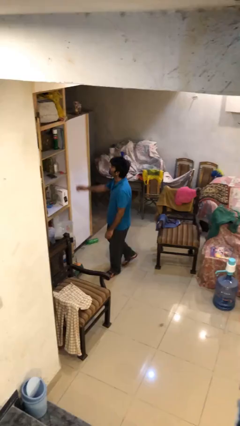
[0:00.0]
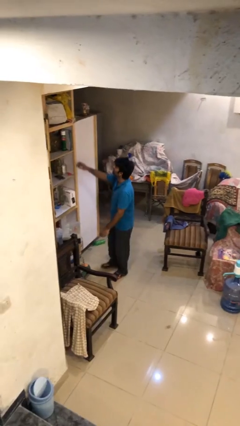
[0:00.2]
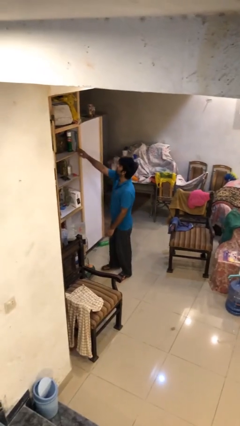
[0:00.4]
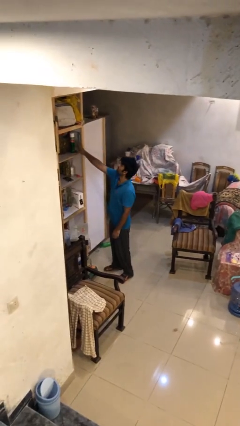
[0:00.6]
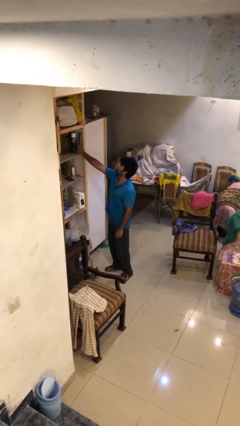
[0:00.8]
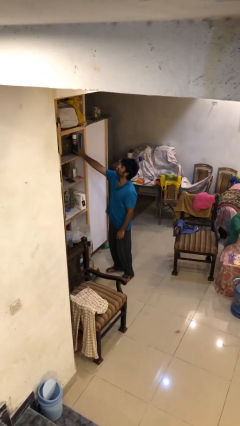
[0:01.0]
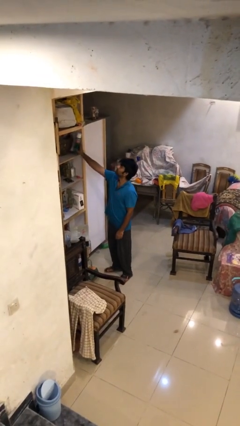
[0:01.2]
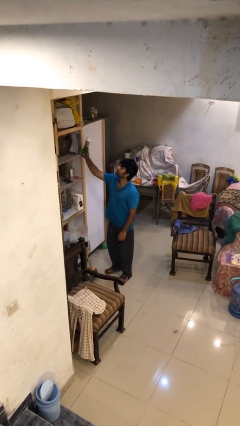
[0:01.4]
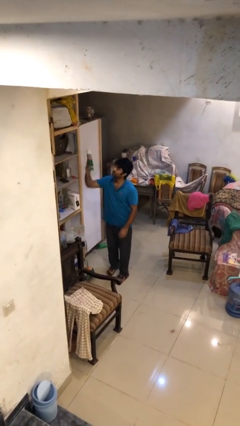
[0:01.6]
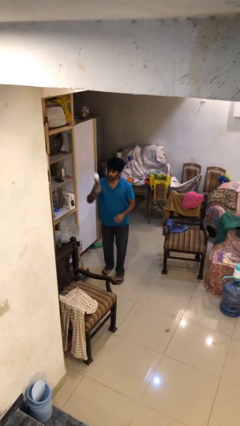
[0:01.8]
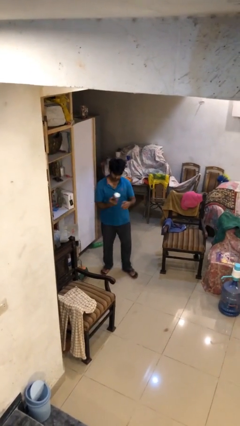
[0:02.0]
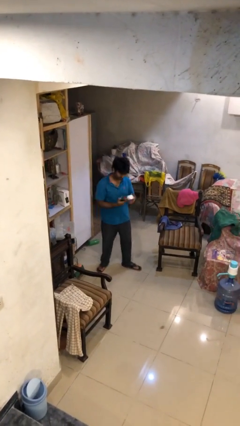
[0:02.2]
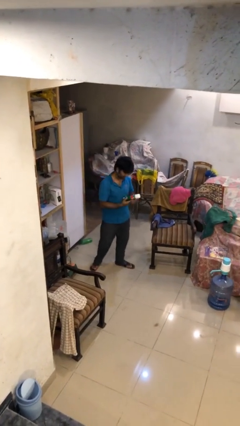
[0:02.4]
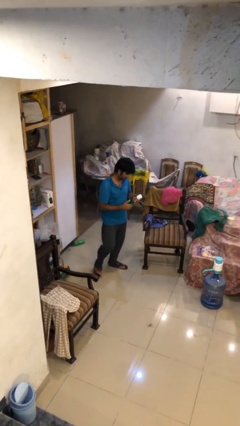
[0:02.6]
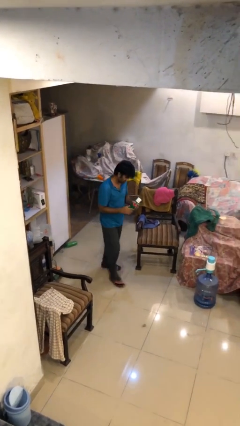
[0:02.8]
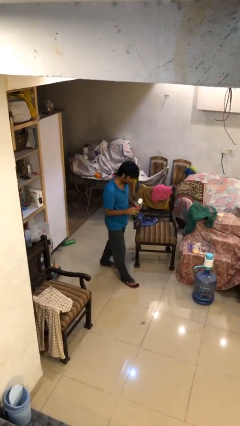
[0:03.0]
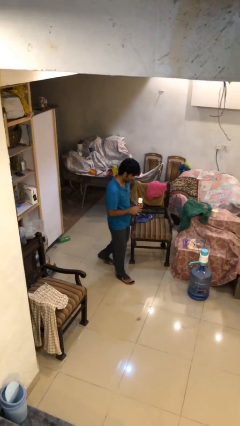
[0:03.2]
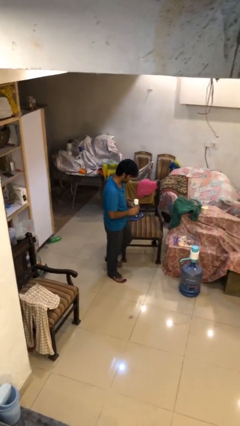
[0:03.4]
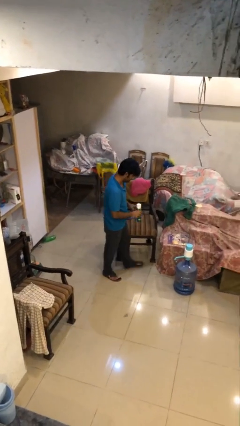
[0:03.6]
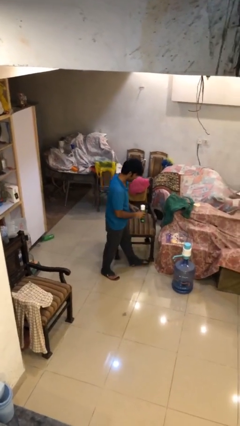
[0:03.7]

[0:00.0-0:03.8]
person picks up object from shelf

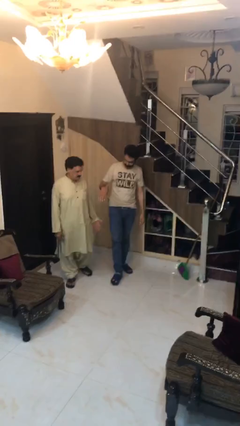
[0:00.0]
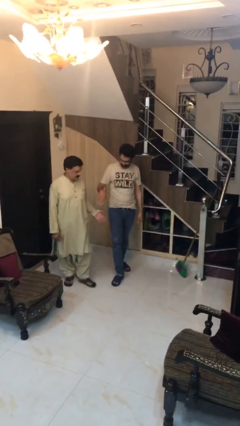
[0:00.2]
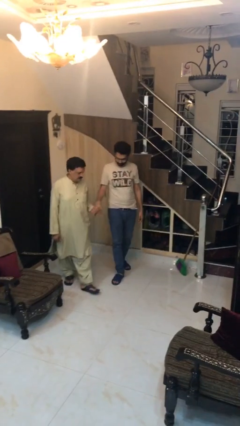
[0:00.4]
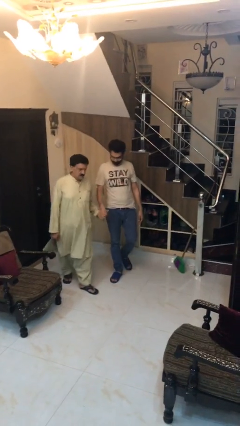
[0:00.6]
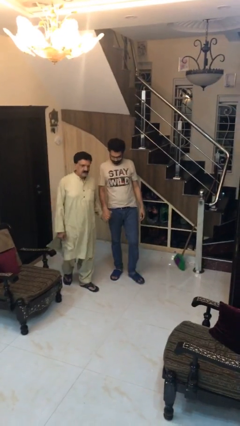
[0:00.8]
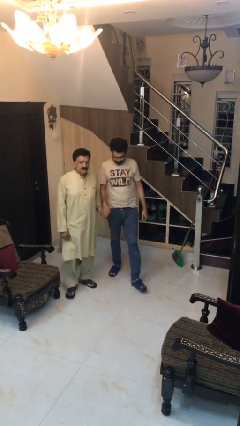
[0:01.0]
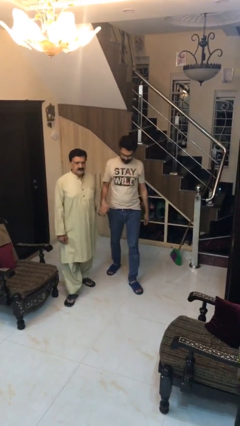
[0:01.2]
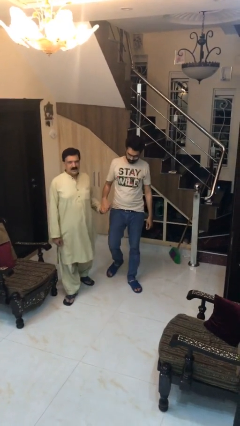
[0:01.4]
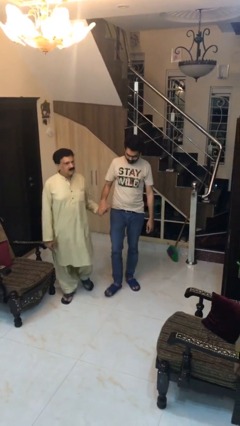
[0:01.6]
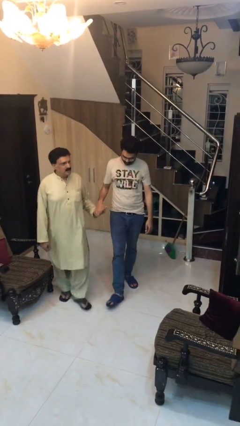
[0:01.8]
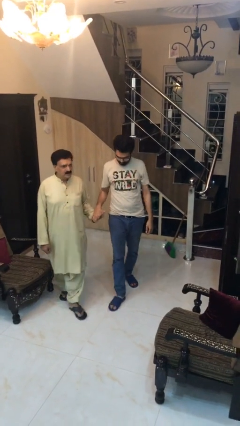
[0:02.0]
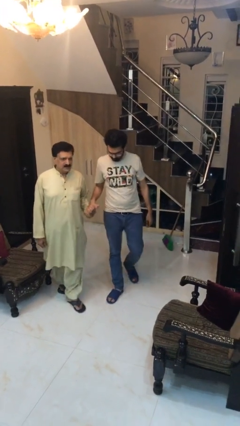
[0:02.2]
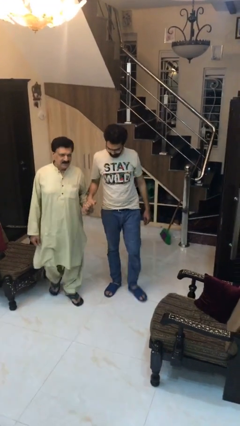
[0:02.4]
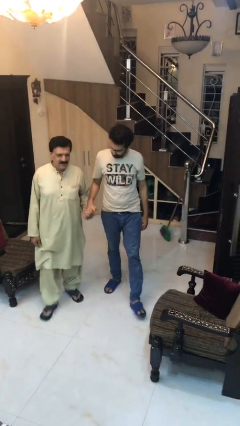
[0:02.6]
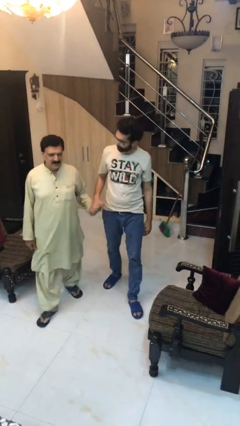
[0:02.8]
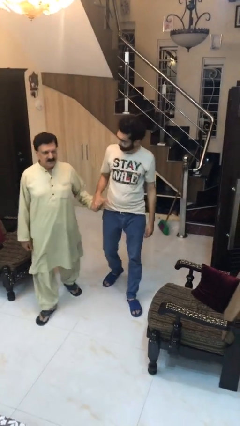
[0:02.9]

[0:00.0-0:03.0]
person holds hand

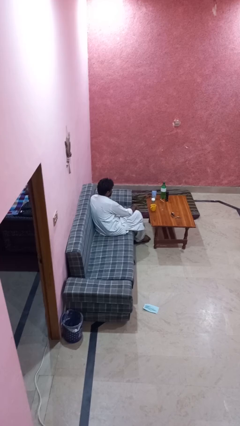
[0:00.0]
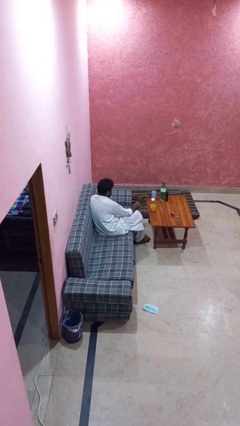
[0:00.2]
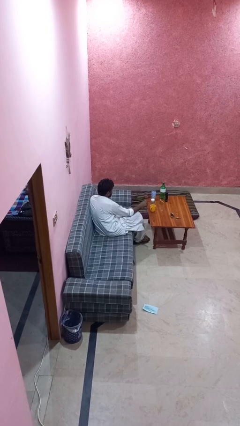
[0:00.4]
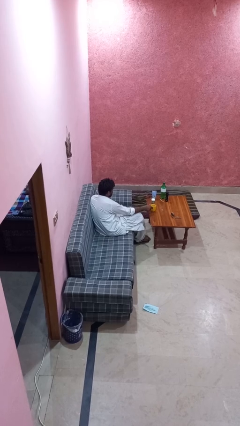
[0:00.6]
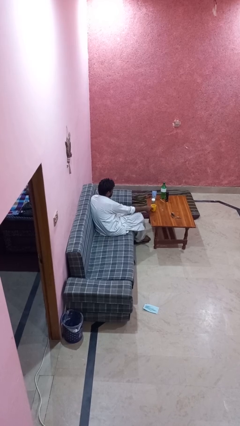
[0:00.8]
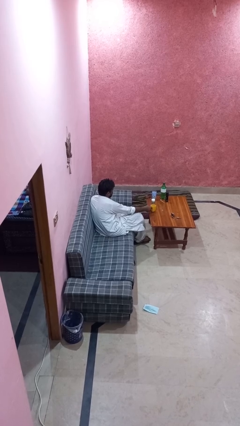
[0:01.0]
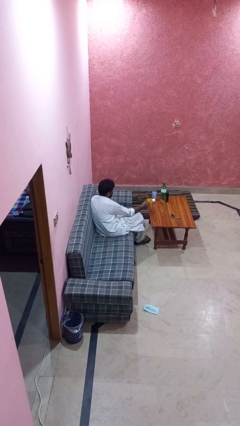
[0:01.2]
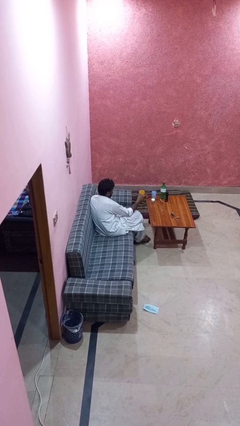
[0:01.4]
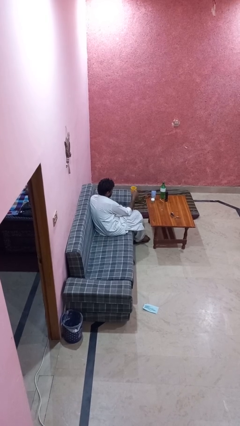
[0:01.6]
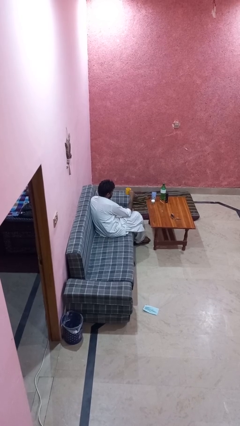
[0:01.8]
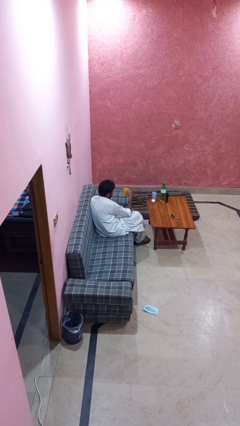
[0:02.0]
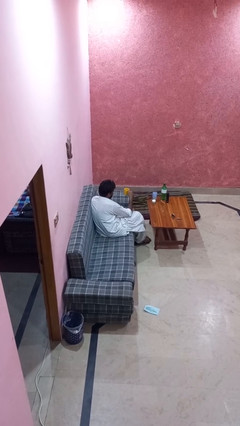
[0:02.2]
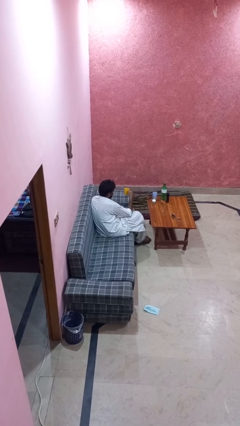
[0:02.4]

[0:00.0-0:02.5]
person picks up object from table

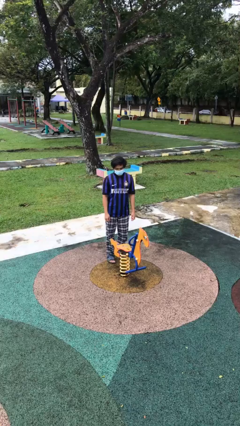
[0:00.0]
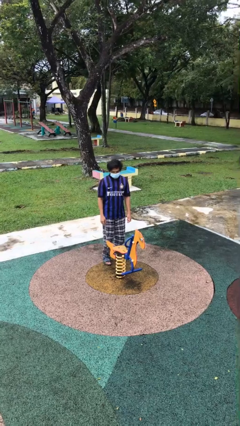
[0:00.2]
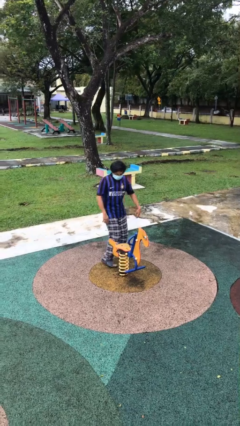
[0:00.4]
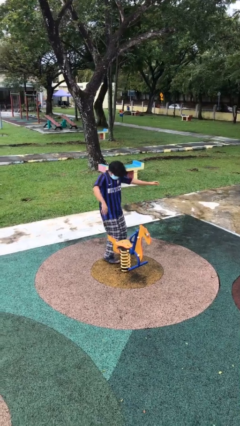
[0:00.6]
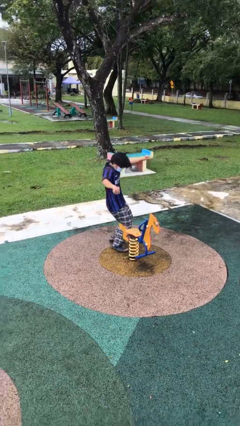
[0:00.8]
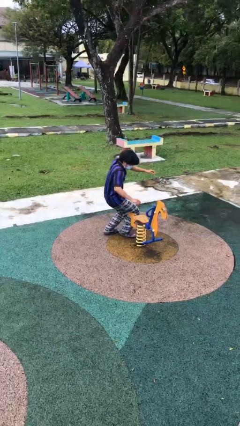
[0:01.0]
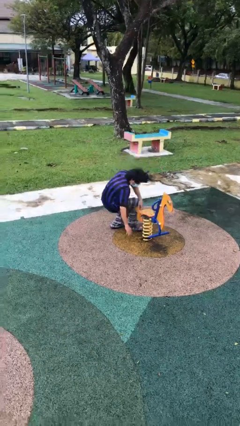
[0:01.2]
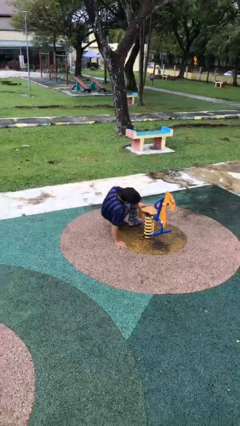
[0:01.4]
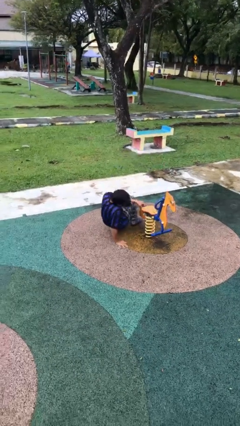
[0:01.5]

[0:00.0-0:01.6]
person trips on object on floor

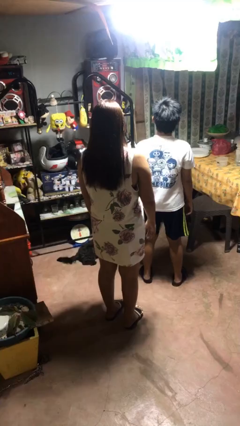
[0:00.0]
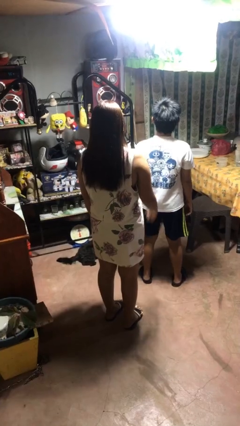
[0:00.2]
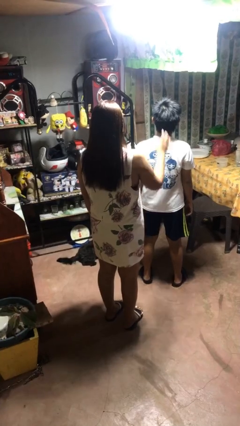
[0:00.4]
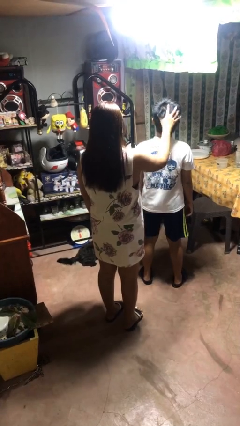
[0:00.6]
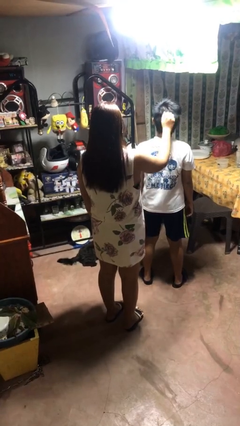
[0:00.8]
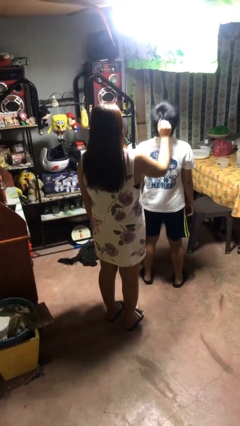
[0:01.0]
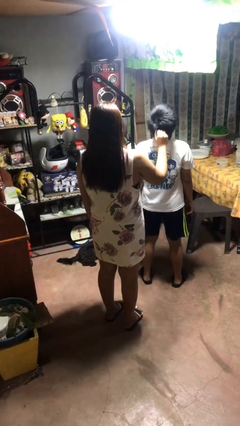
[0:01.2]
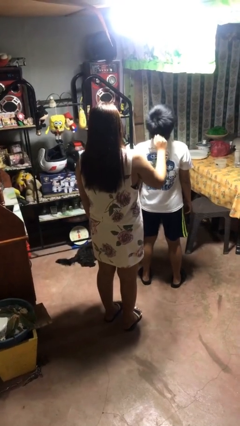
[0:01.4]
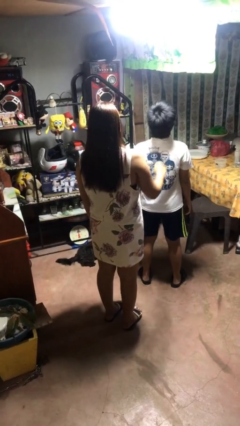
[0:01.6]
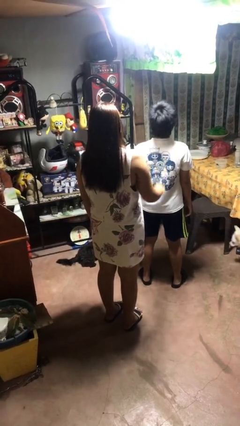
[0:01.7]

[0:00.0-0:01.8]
person grabs person by hair

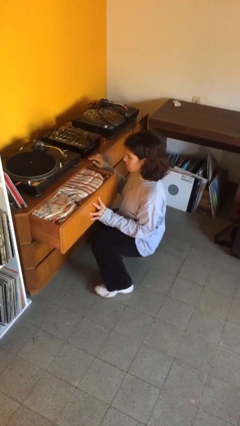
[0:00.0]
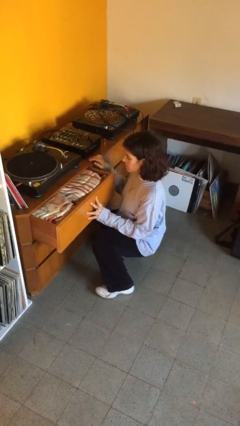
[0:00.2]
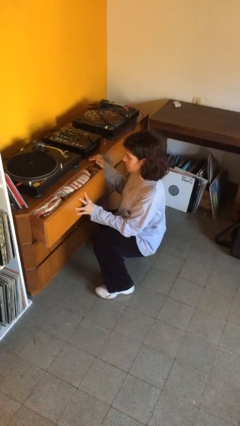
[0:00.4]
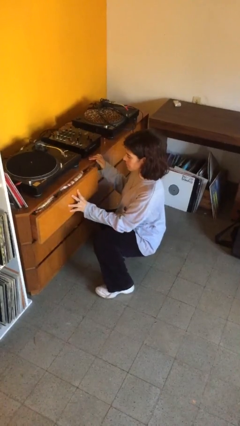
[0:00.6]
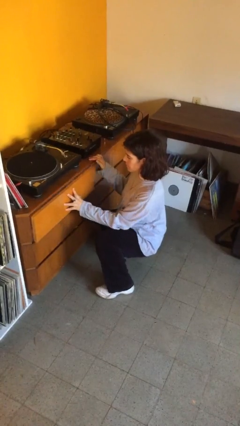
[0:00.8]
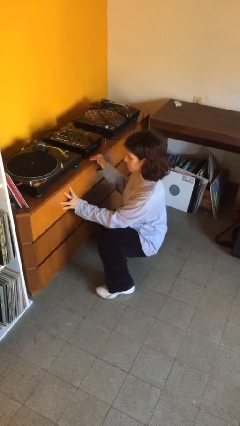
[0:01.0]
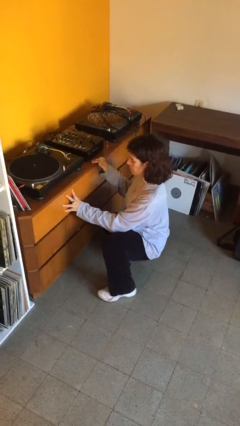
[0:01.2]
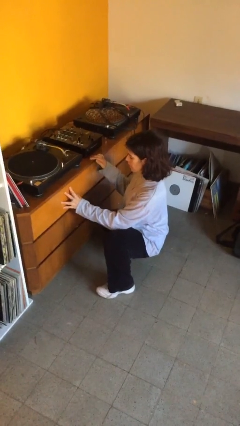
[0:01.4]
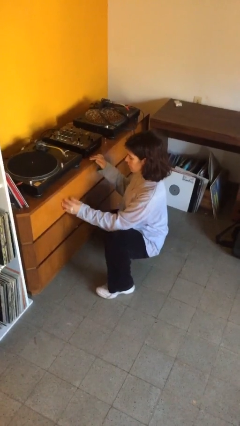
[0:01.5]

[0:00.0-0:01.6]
person closes dresser drawer

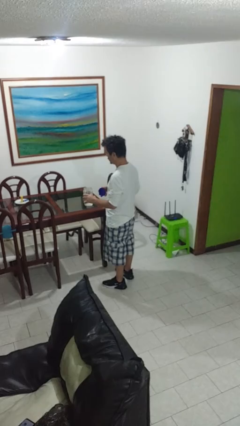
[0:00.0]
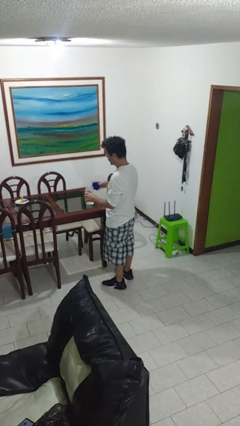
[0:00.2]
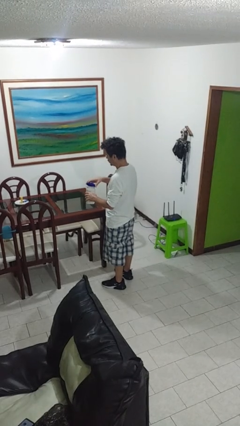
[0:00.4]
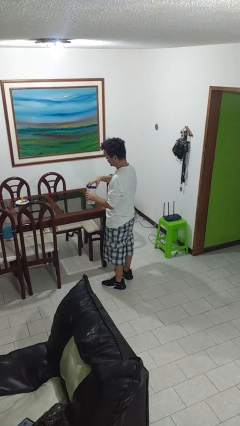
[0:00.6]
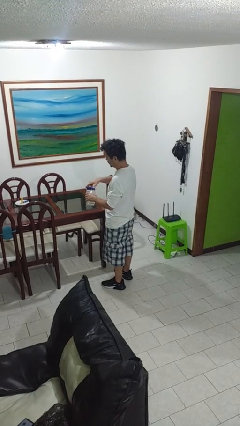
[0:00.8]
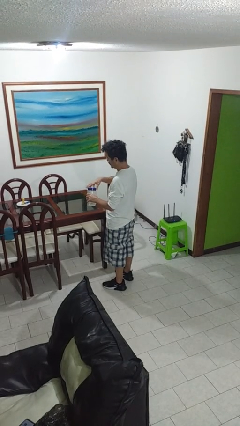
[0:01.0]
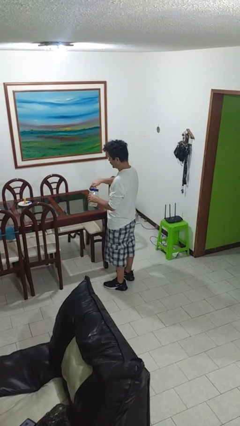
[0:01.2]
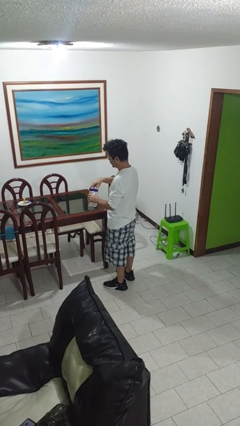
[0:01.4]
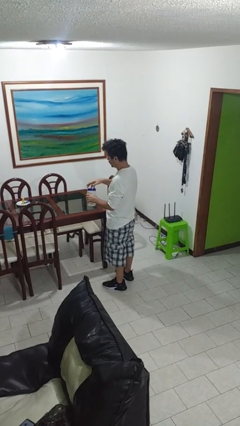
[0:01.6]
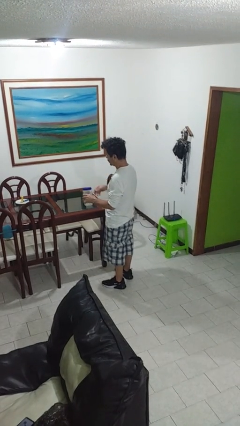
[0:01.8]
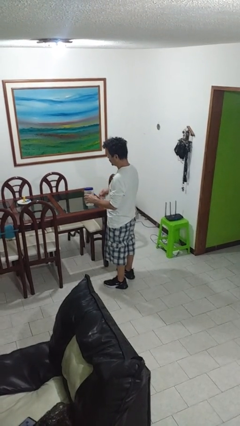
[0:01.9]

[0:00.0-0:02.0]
person closes jar

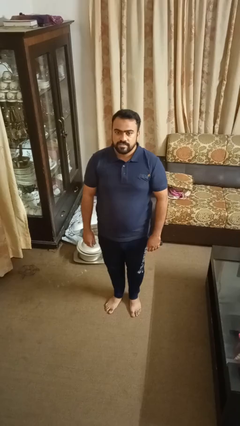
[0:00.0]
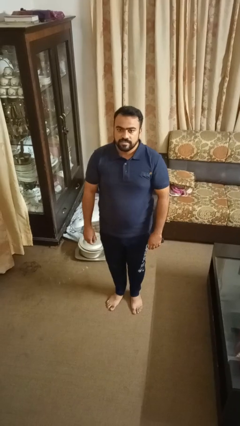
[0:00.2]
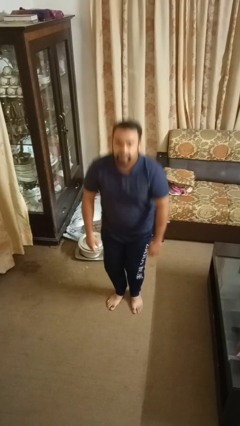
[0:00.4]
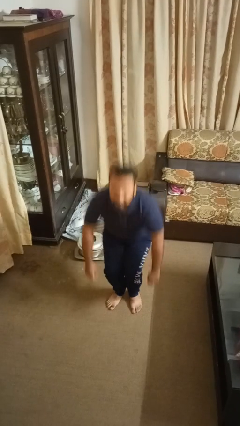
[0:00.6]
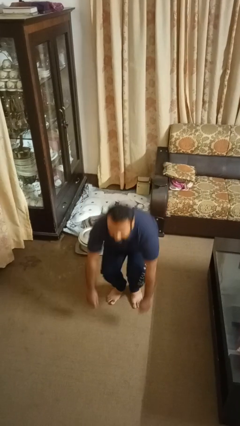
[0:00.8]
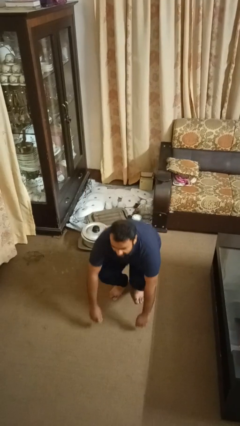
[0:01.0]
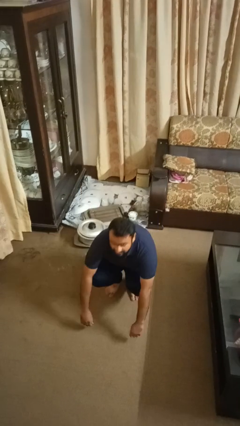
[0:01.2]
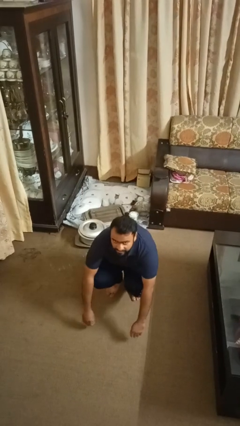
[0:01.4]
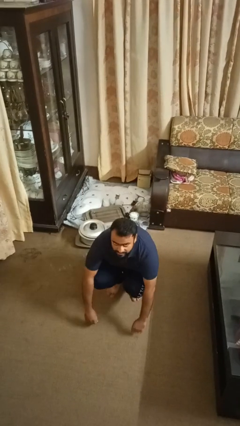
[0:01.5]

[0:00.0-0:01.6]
person squats
